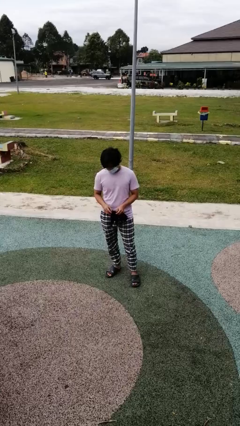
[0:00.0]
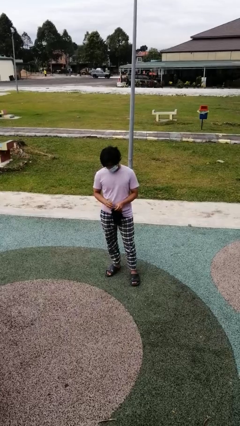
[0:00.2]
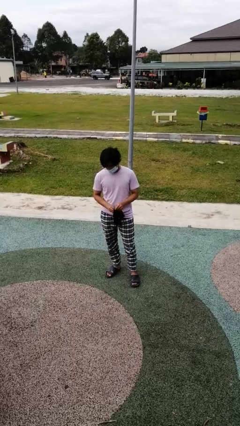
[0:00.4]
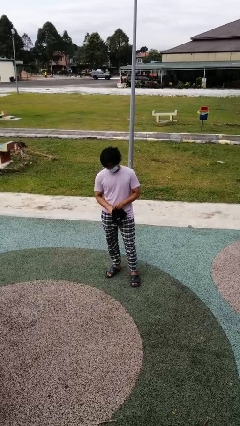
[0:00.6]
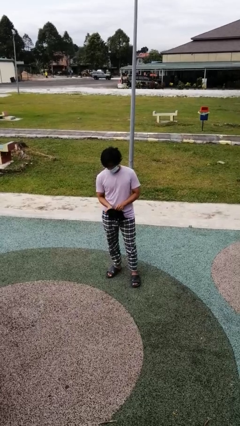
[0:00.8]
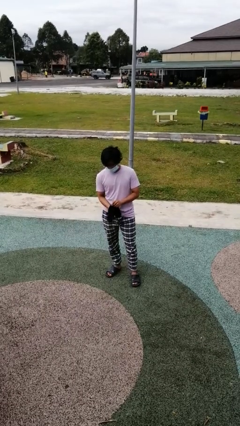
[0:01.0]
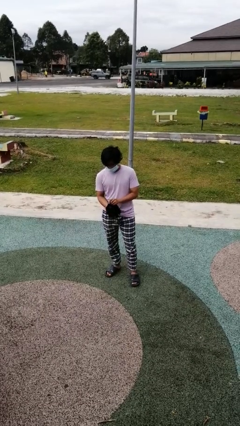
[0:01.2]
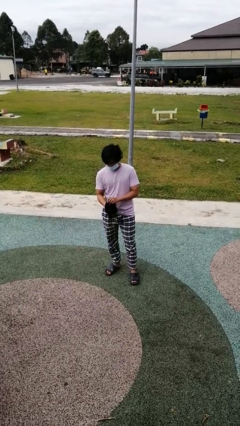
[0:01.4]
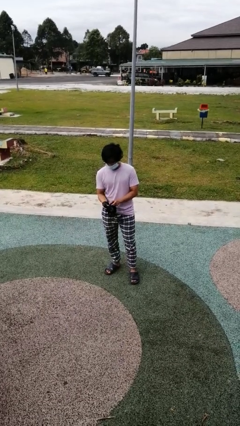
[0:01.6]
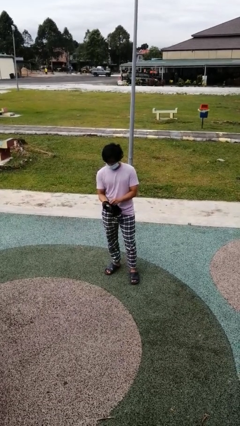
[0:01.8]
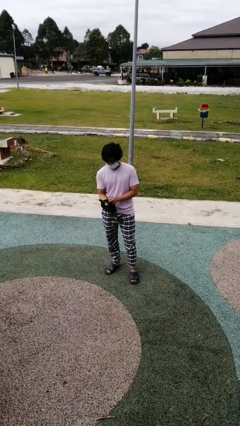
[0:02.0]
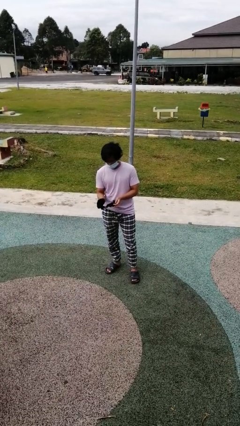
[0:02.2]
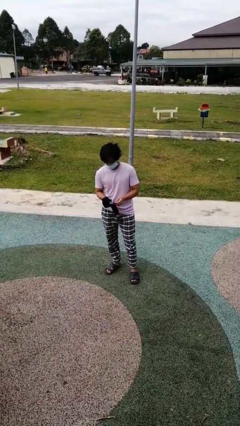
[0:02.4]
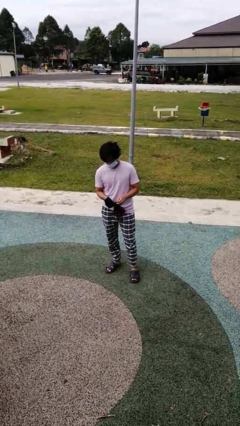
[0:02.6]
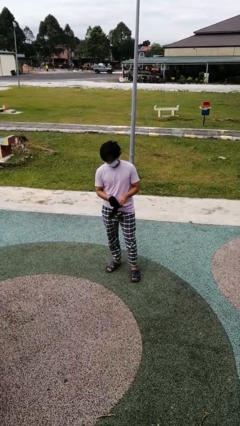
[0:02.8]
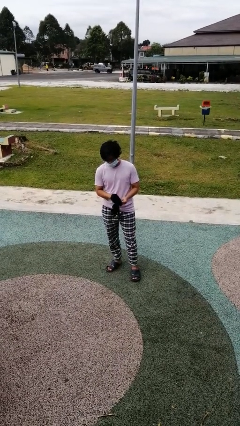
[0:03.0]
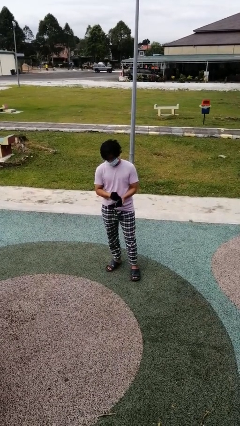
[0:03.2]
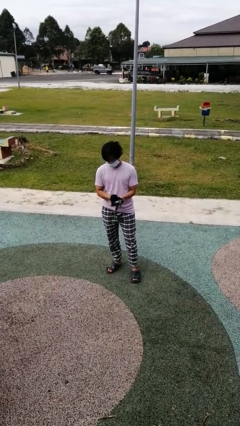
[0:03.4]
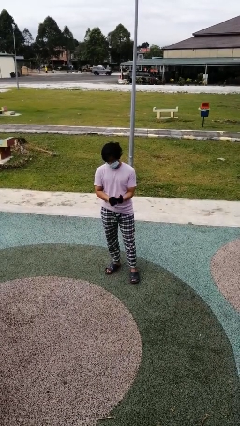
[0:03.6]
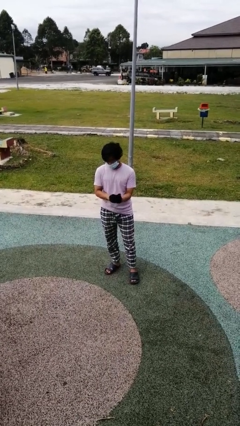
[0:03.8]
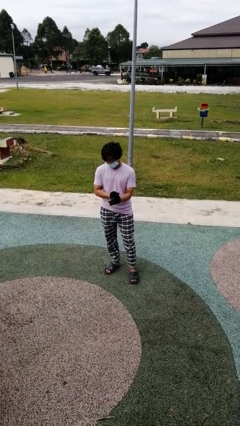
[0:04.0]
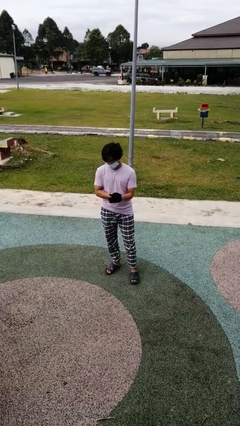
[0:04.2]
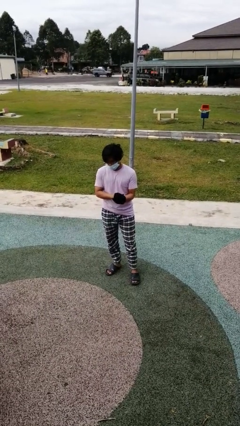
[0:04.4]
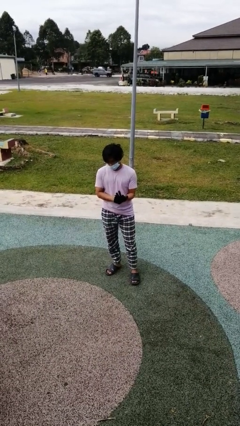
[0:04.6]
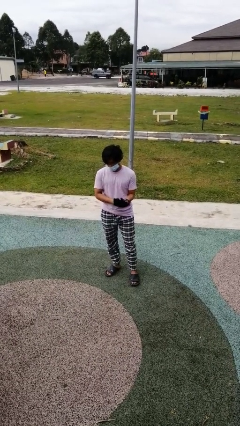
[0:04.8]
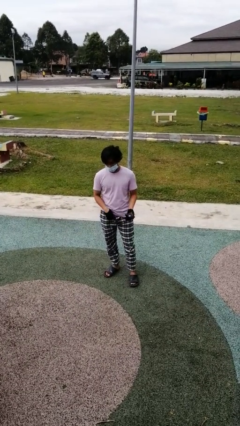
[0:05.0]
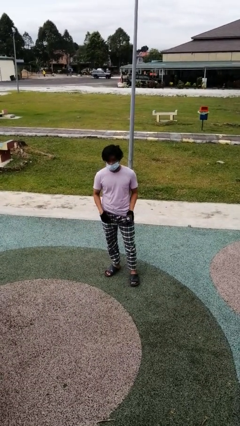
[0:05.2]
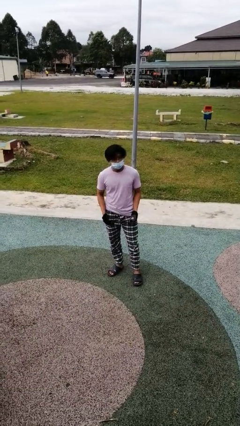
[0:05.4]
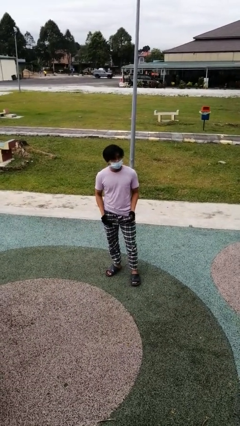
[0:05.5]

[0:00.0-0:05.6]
person puts on gloves

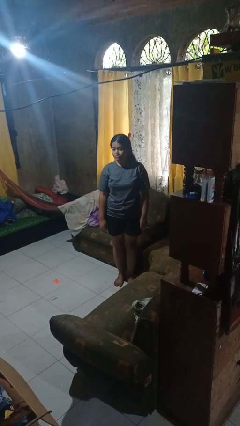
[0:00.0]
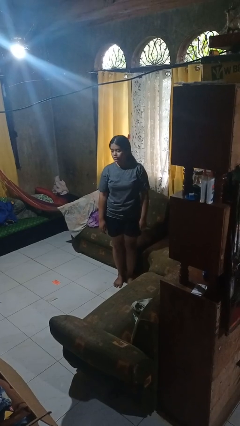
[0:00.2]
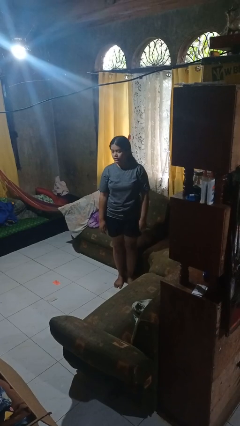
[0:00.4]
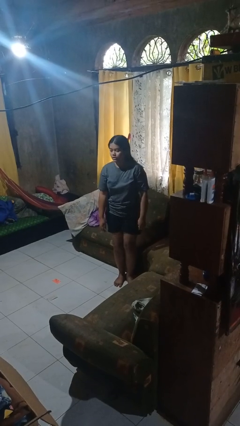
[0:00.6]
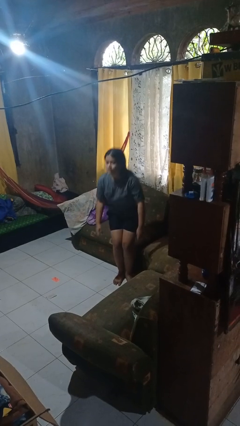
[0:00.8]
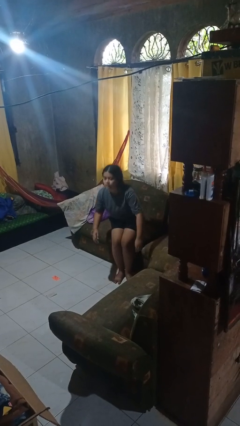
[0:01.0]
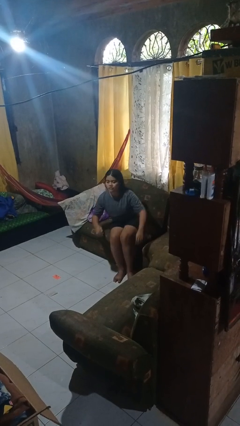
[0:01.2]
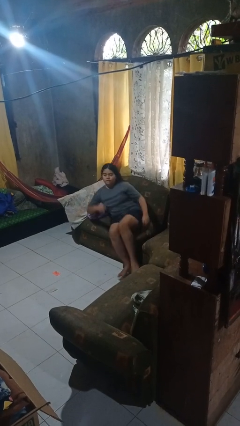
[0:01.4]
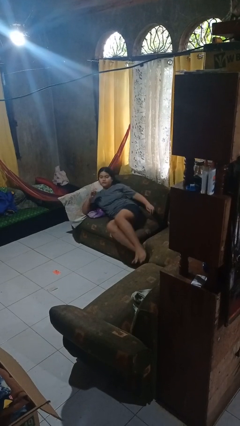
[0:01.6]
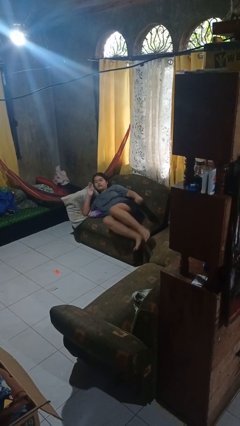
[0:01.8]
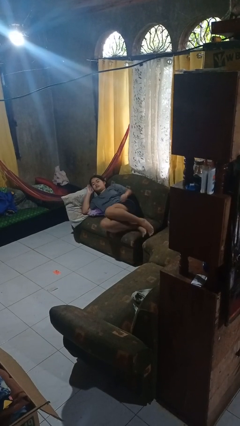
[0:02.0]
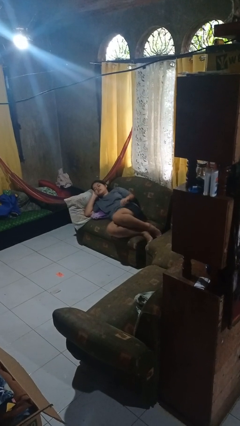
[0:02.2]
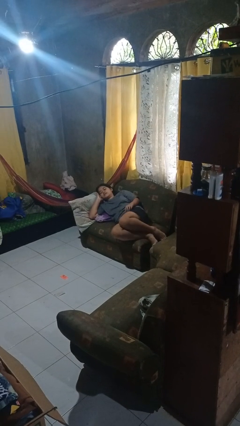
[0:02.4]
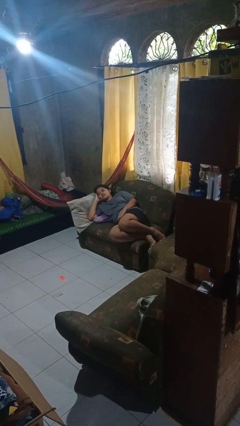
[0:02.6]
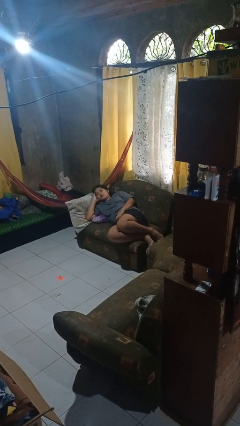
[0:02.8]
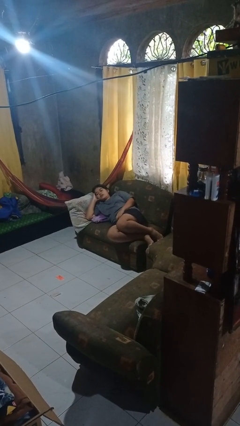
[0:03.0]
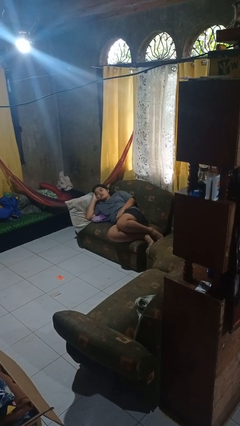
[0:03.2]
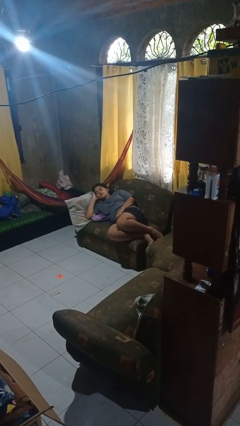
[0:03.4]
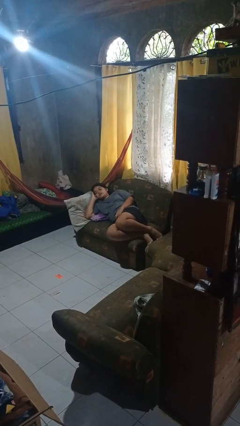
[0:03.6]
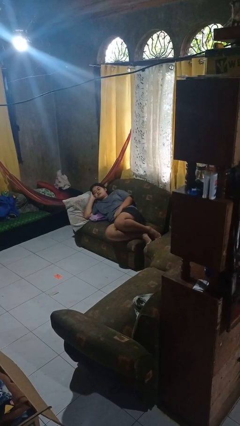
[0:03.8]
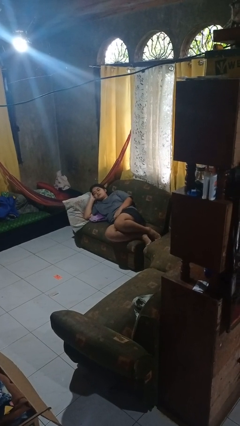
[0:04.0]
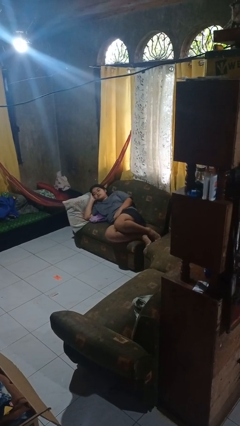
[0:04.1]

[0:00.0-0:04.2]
person lies down on couch

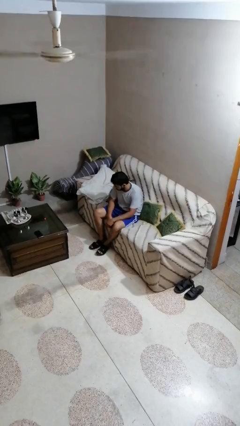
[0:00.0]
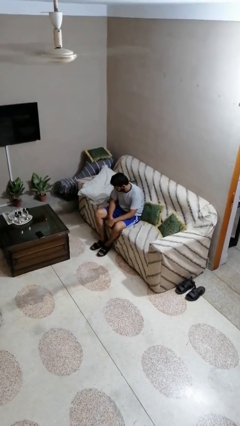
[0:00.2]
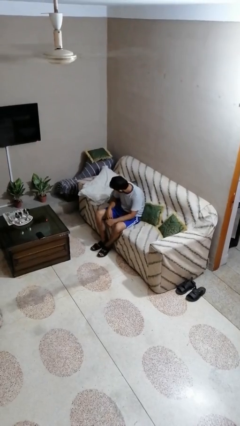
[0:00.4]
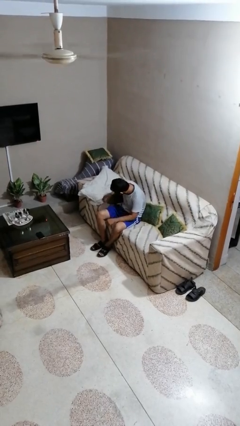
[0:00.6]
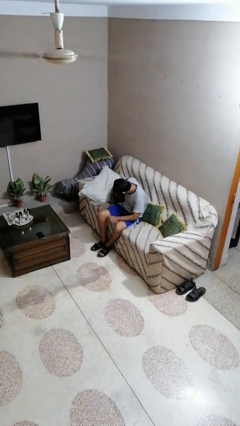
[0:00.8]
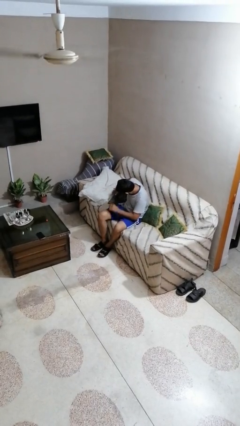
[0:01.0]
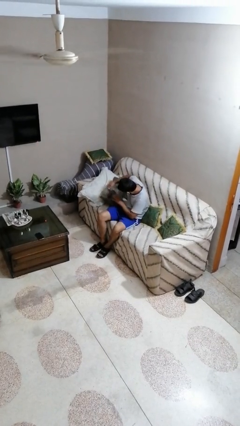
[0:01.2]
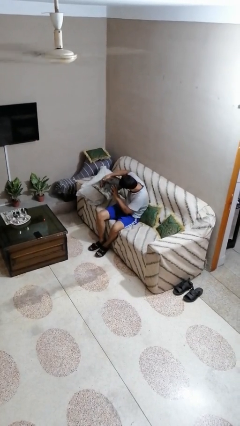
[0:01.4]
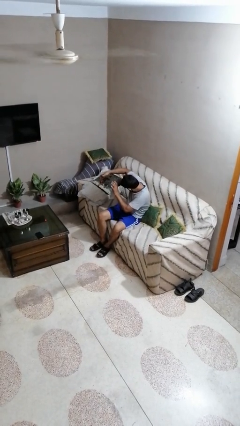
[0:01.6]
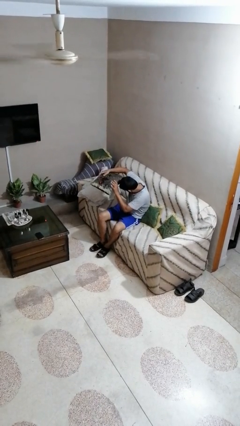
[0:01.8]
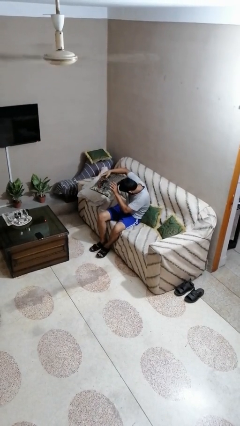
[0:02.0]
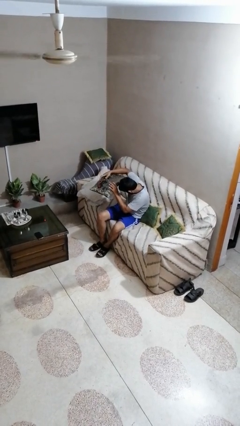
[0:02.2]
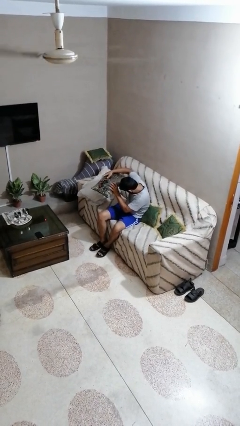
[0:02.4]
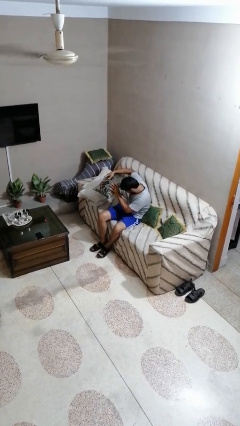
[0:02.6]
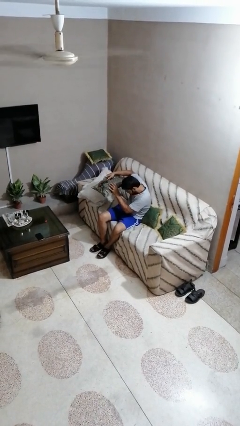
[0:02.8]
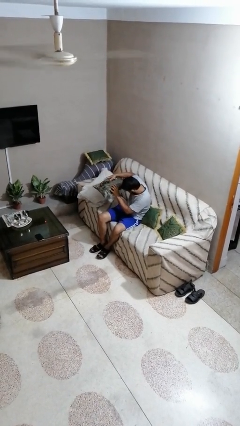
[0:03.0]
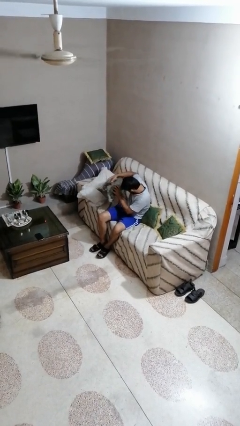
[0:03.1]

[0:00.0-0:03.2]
person searches in couch

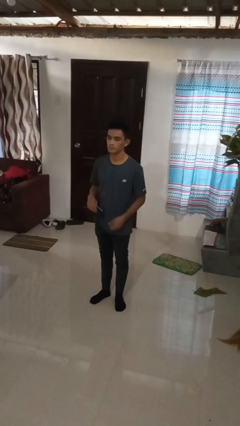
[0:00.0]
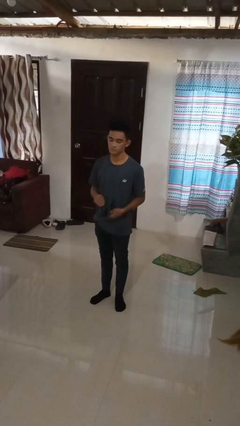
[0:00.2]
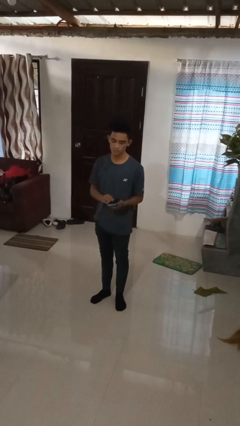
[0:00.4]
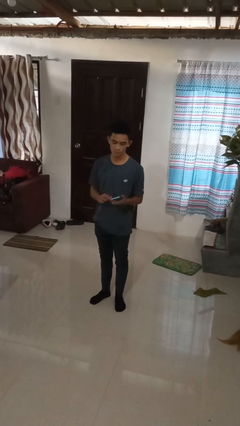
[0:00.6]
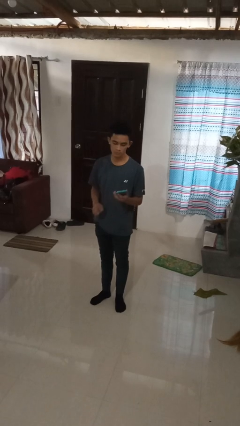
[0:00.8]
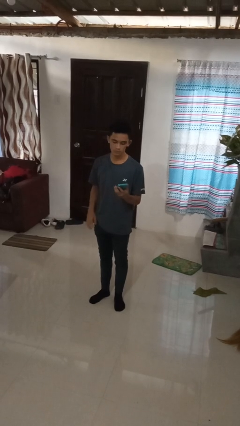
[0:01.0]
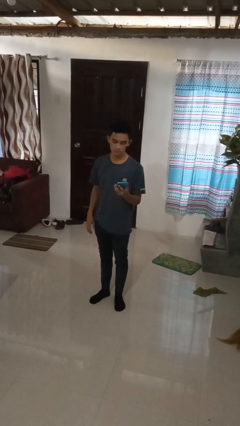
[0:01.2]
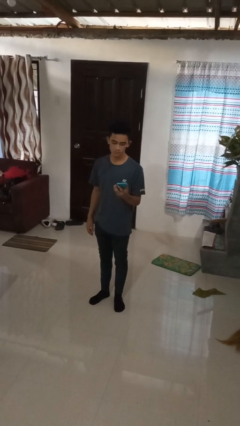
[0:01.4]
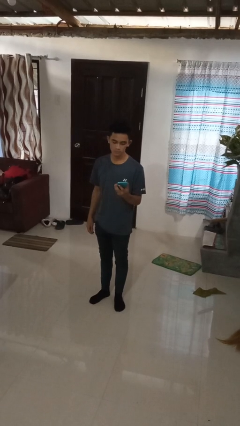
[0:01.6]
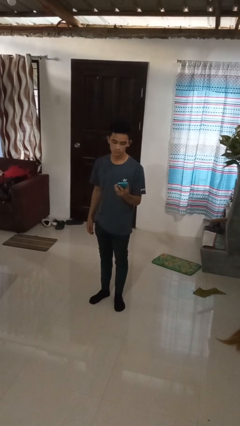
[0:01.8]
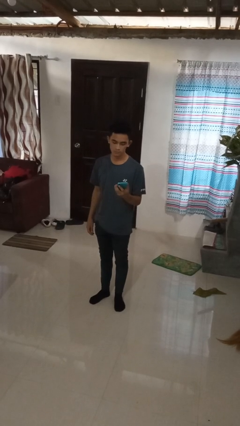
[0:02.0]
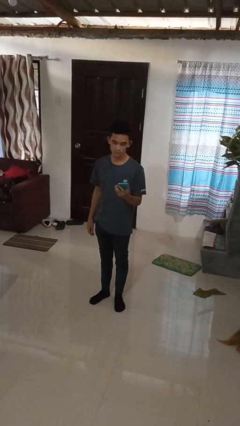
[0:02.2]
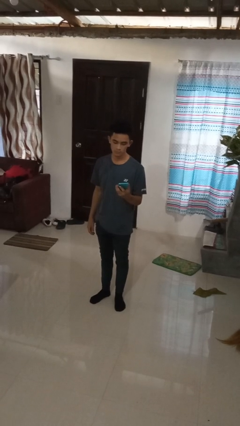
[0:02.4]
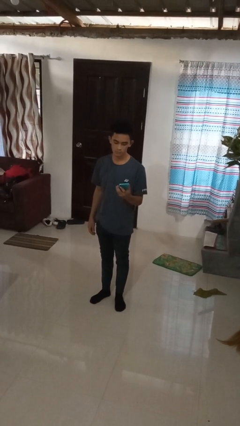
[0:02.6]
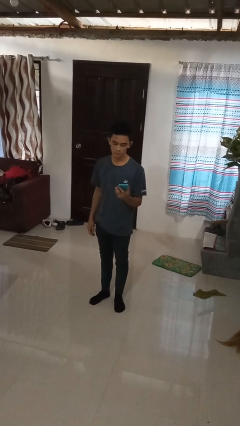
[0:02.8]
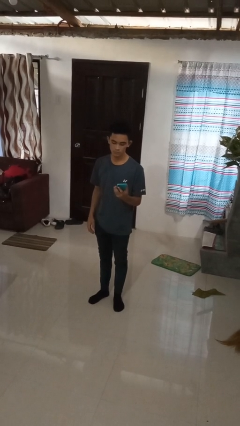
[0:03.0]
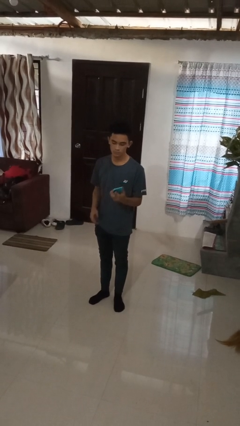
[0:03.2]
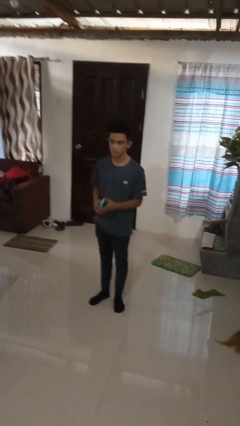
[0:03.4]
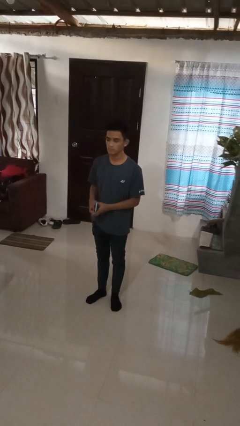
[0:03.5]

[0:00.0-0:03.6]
person takes phone from pocket

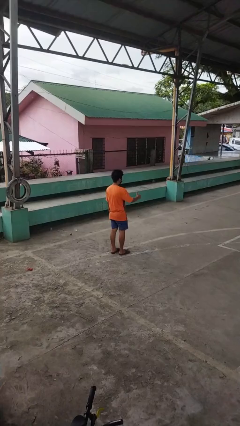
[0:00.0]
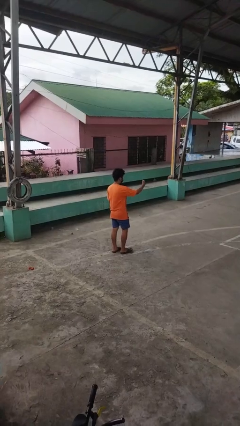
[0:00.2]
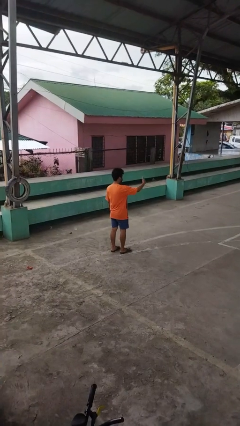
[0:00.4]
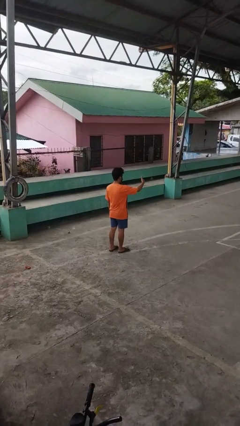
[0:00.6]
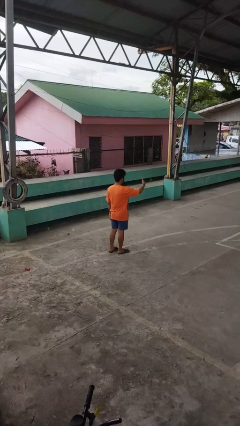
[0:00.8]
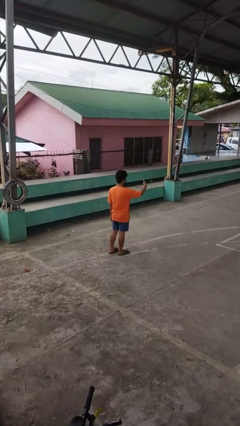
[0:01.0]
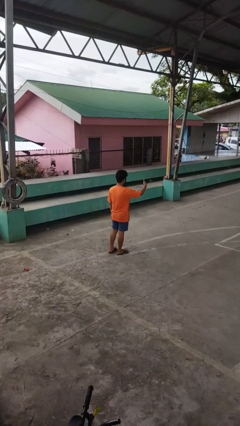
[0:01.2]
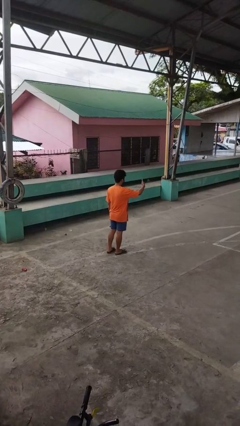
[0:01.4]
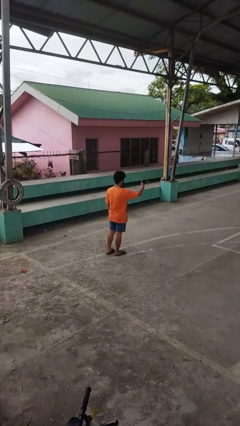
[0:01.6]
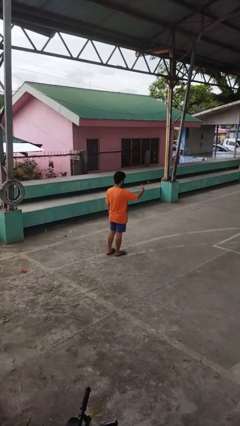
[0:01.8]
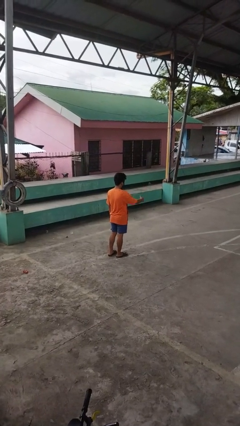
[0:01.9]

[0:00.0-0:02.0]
person gestures thumbs up
